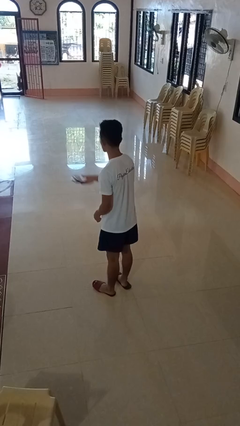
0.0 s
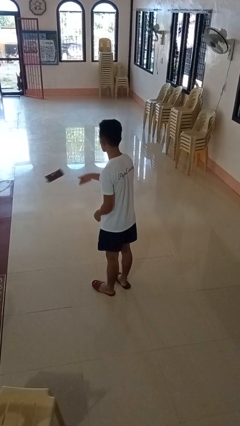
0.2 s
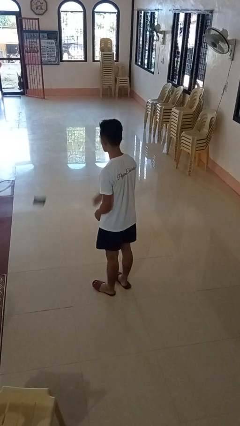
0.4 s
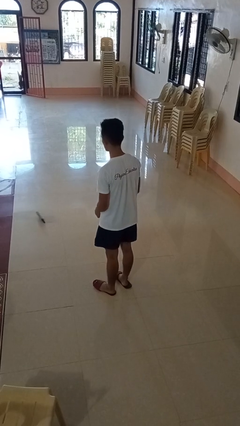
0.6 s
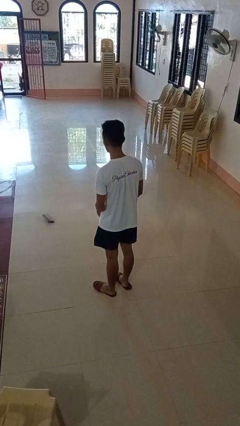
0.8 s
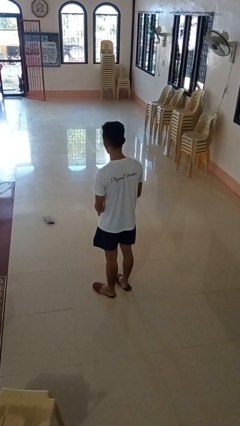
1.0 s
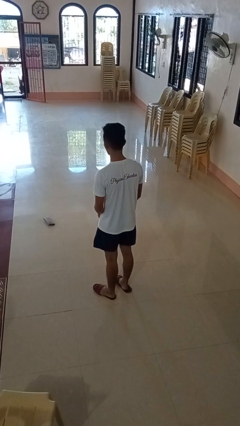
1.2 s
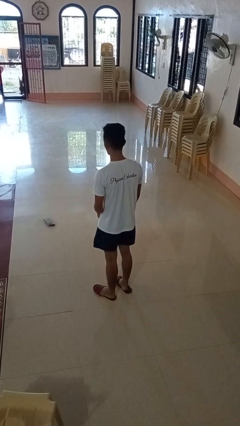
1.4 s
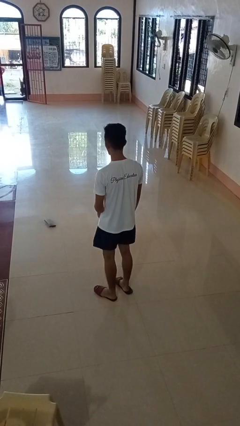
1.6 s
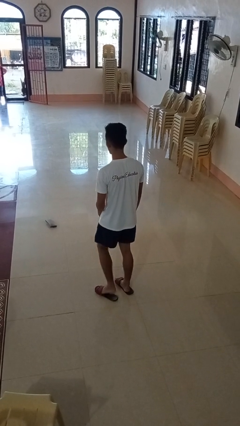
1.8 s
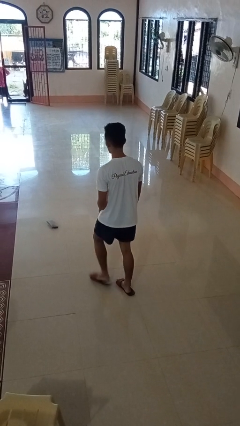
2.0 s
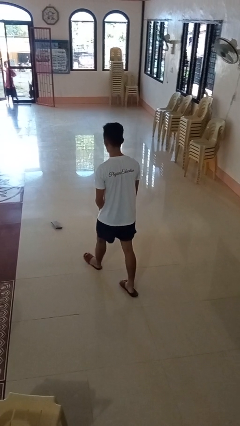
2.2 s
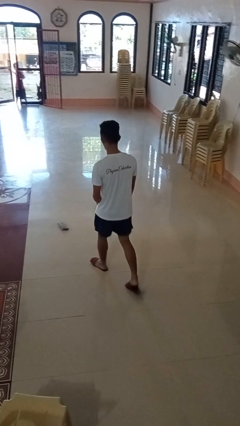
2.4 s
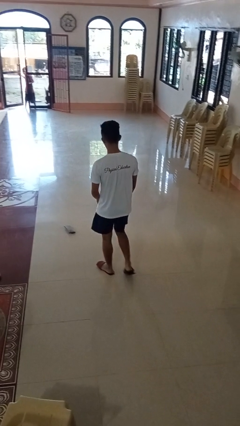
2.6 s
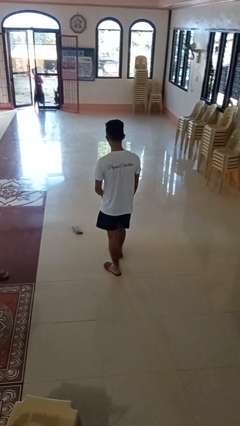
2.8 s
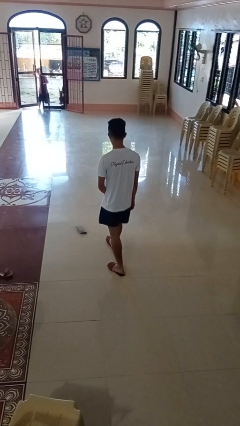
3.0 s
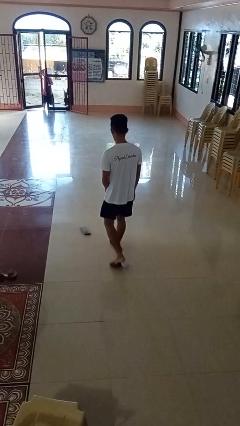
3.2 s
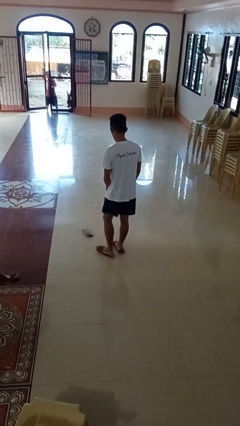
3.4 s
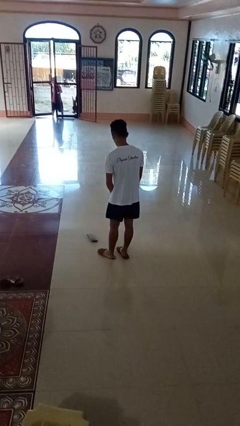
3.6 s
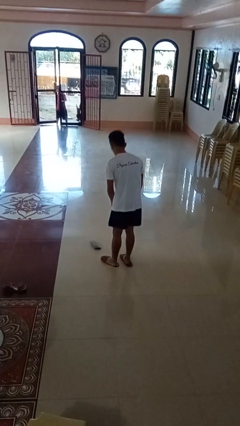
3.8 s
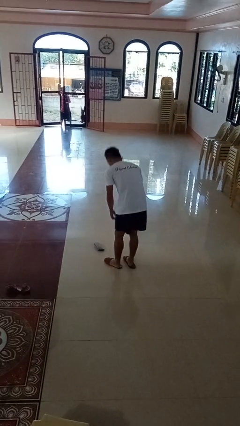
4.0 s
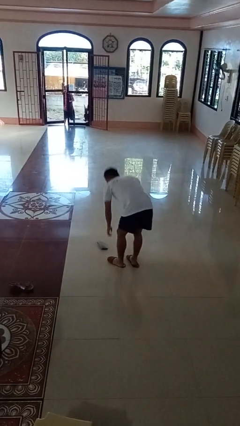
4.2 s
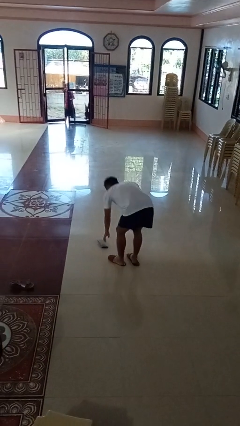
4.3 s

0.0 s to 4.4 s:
person throws object to ground

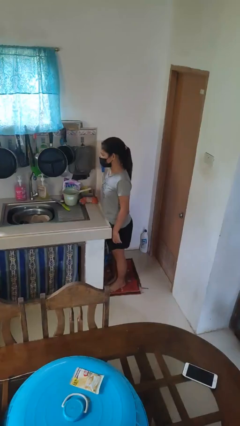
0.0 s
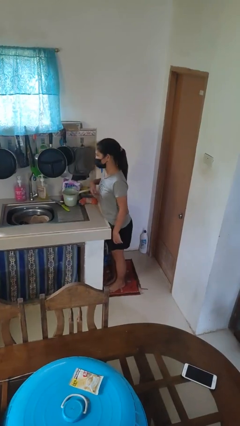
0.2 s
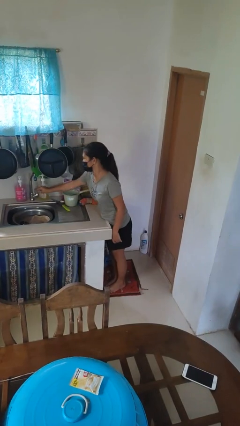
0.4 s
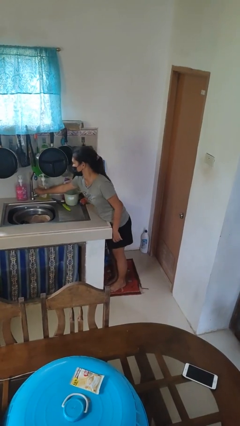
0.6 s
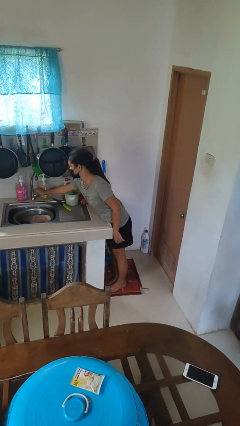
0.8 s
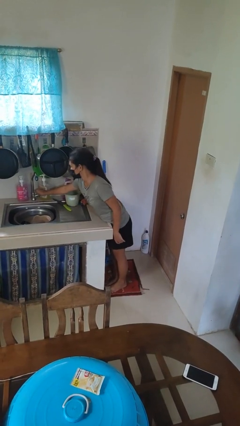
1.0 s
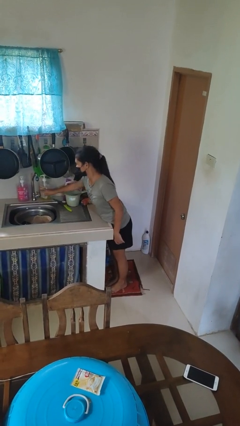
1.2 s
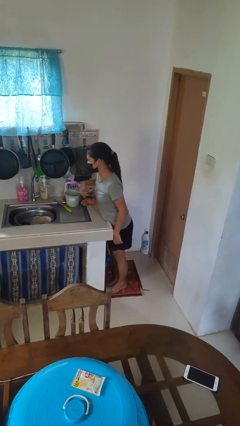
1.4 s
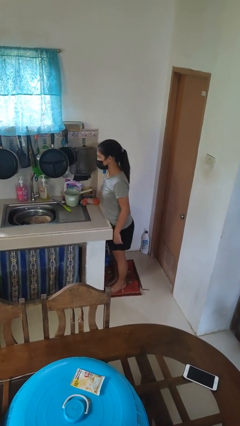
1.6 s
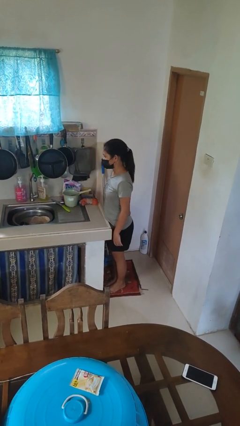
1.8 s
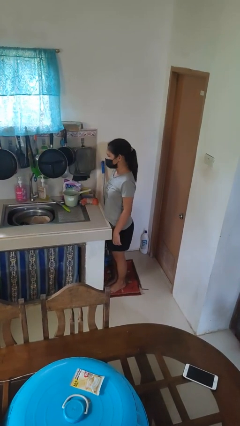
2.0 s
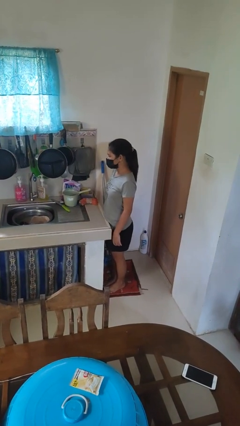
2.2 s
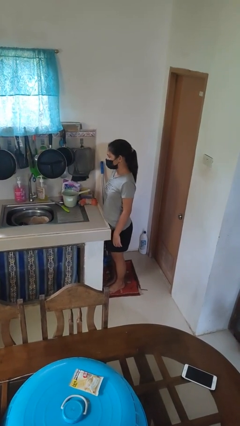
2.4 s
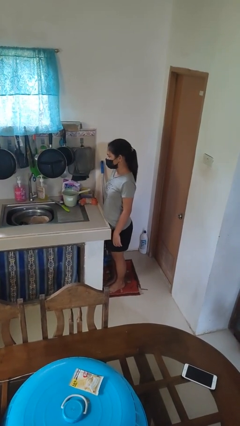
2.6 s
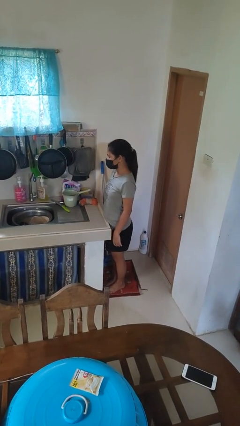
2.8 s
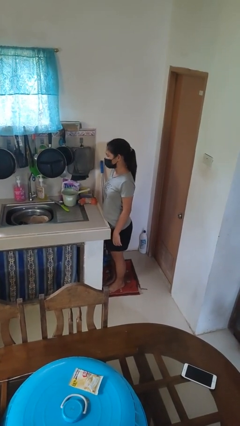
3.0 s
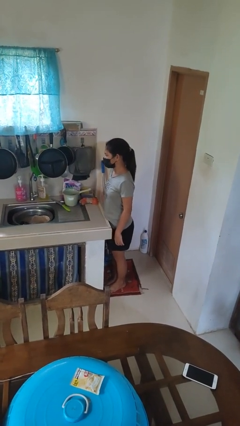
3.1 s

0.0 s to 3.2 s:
person turns on faucet

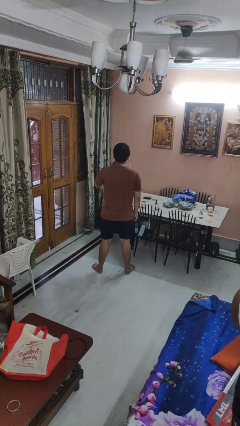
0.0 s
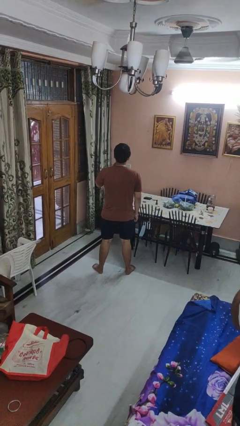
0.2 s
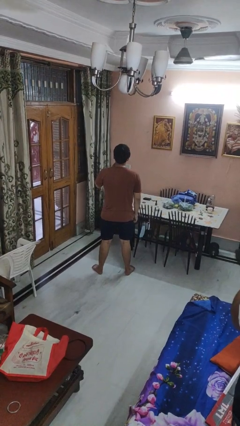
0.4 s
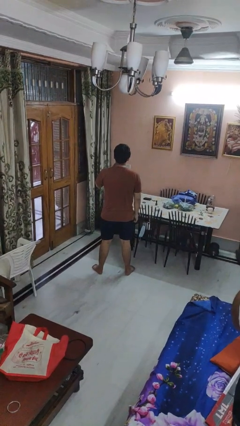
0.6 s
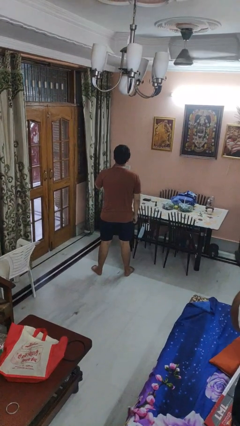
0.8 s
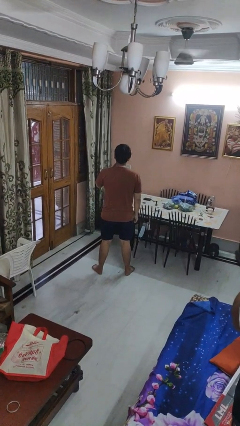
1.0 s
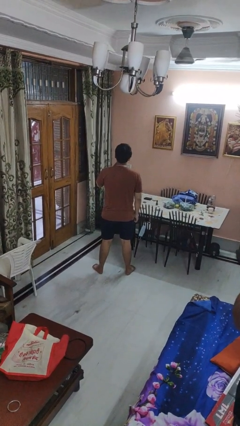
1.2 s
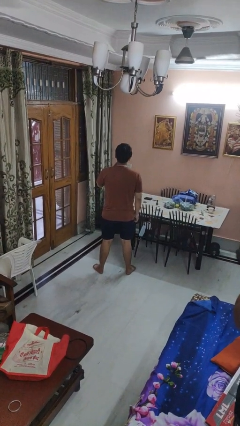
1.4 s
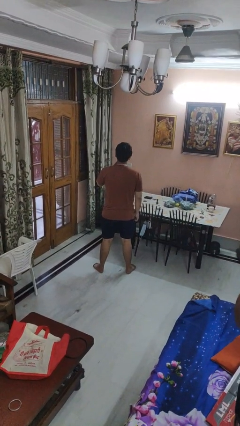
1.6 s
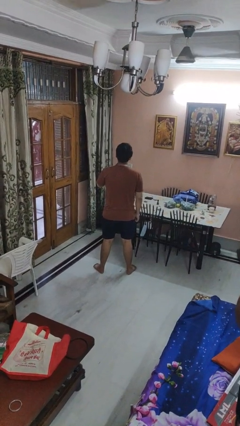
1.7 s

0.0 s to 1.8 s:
person strokes chin

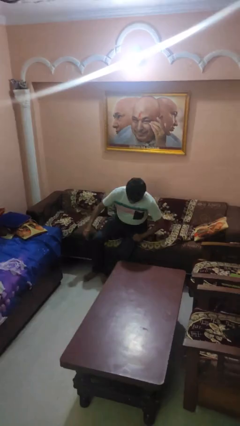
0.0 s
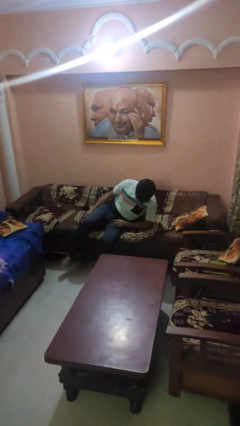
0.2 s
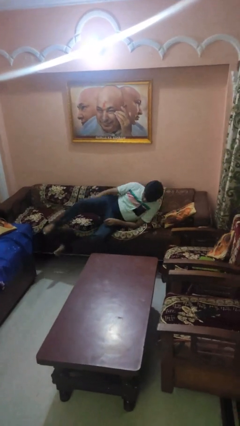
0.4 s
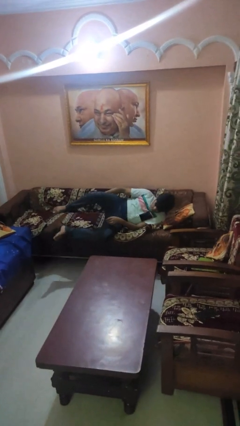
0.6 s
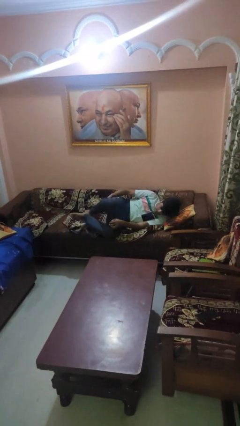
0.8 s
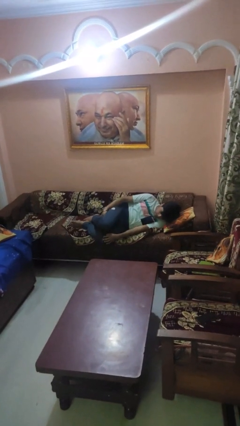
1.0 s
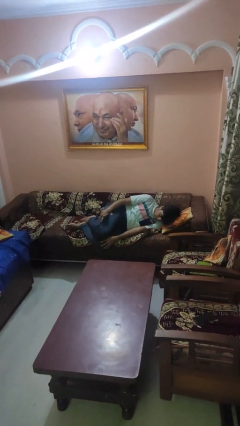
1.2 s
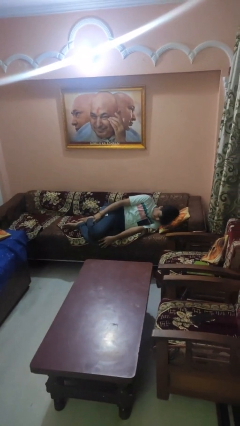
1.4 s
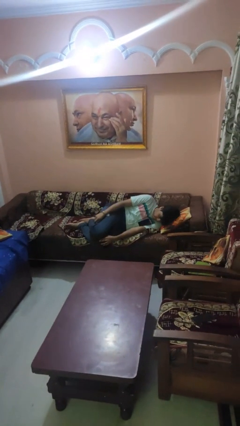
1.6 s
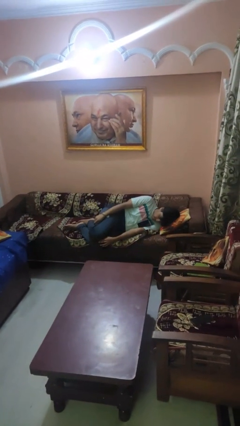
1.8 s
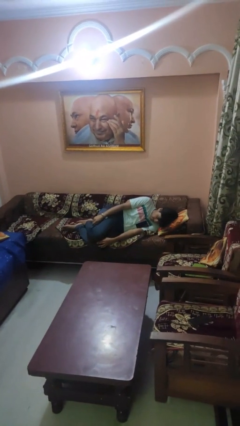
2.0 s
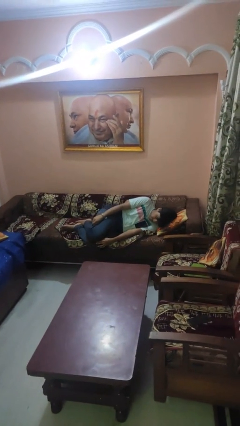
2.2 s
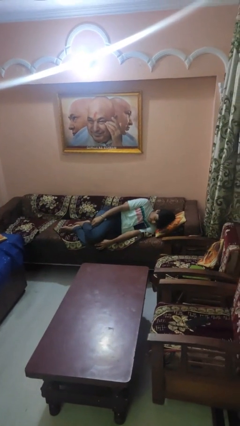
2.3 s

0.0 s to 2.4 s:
person lies down on couch

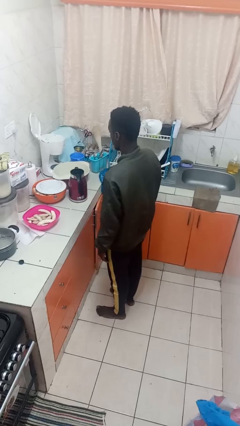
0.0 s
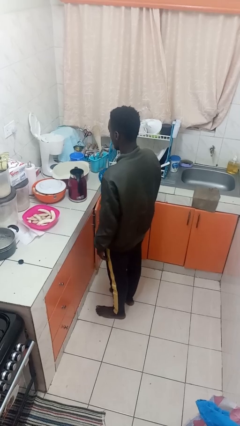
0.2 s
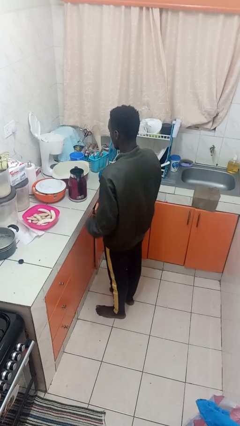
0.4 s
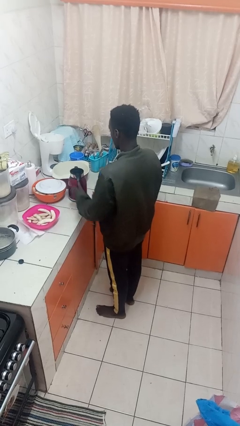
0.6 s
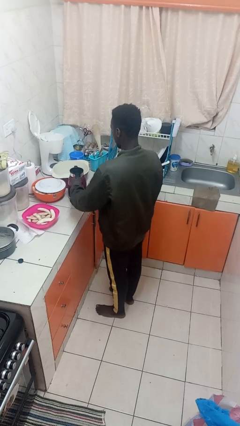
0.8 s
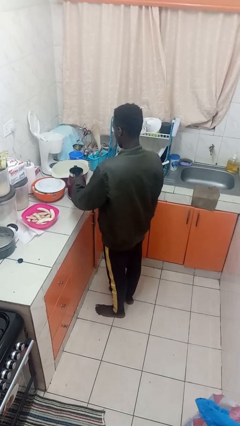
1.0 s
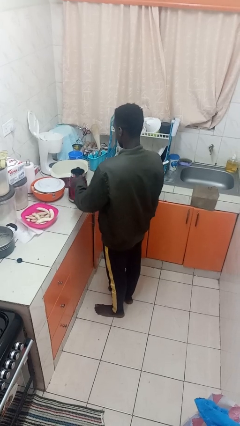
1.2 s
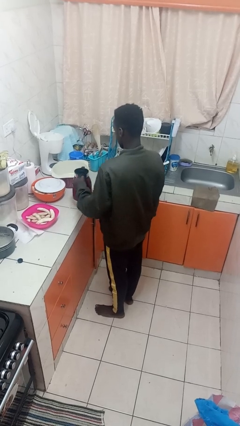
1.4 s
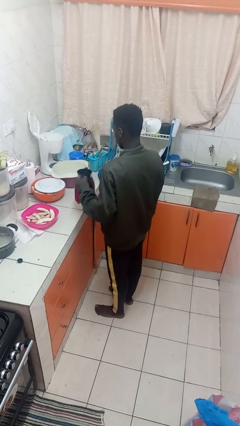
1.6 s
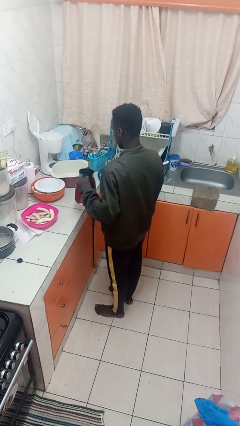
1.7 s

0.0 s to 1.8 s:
person picks up object from countertop

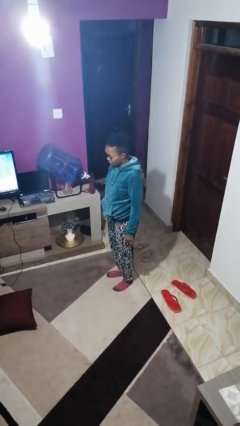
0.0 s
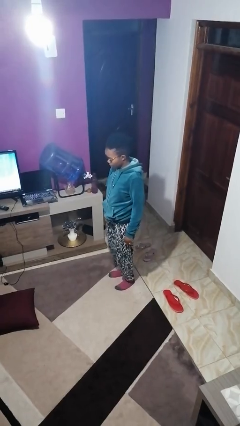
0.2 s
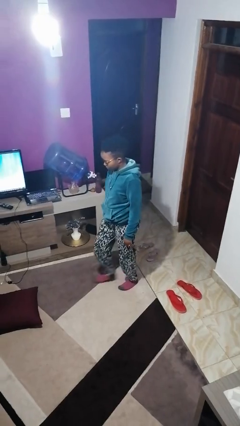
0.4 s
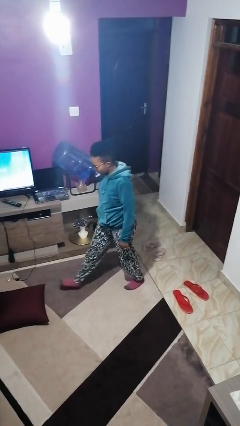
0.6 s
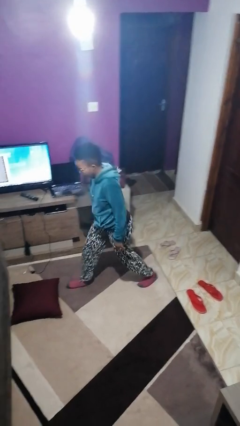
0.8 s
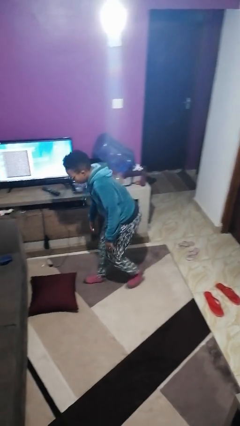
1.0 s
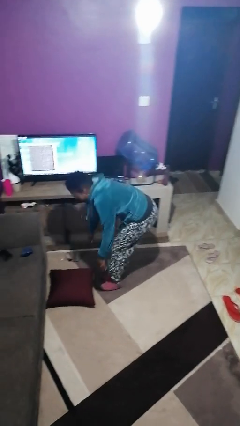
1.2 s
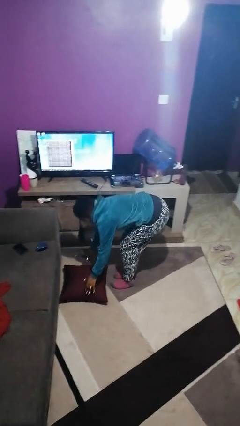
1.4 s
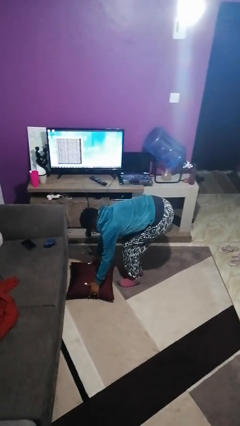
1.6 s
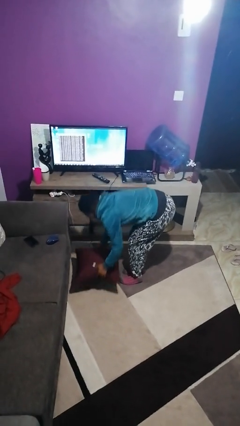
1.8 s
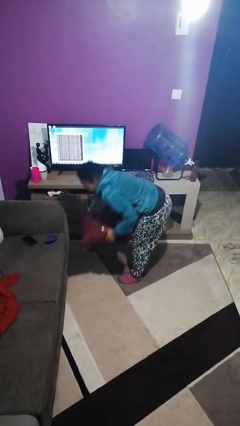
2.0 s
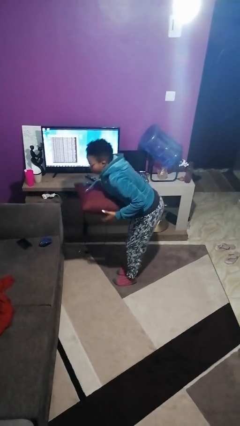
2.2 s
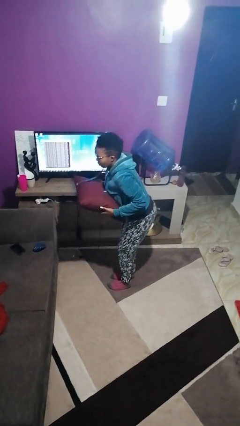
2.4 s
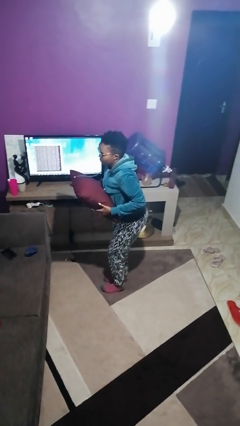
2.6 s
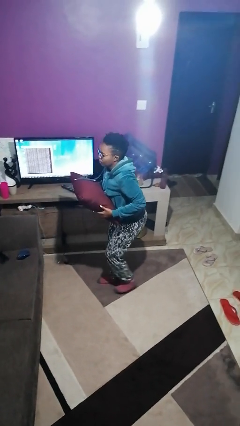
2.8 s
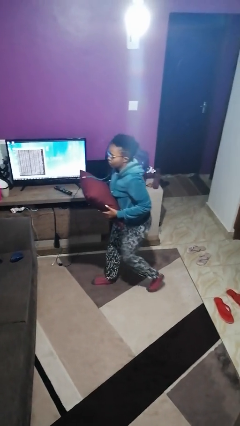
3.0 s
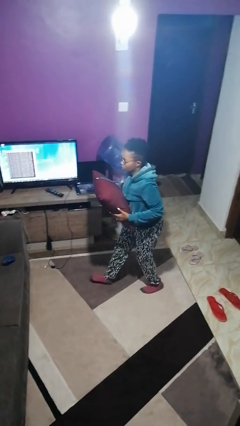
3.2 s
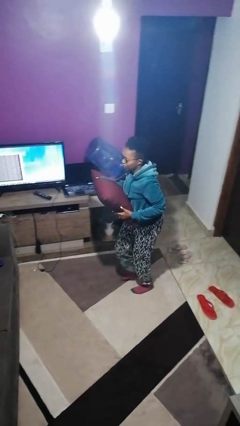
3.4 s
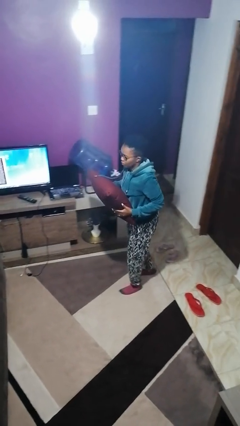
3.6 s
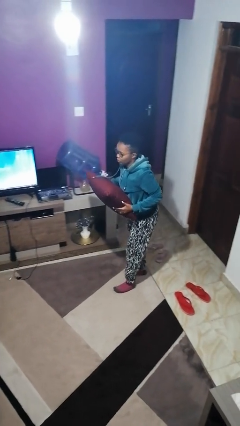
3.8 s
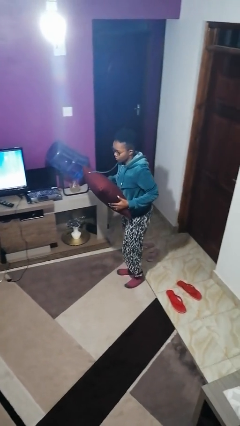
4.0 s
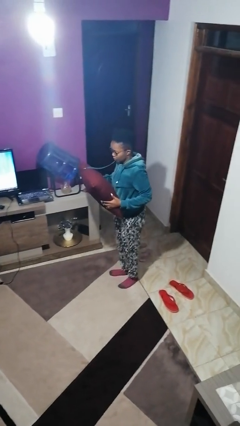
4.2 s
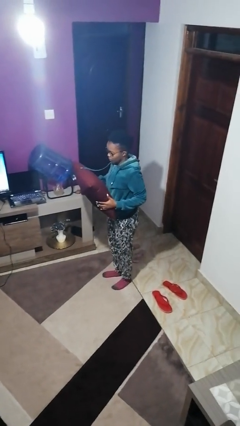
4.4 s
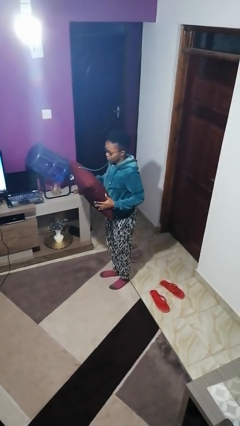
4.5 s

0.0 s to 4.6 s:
person picks up object from floor
